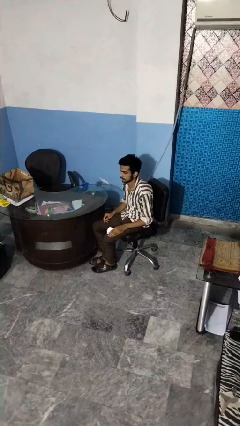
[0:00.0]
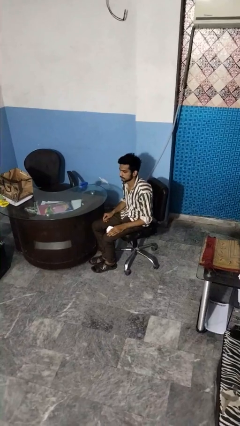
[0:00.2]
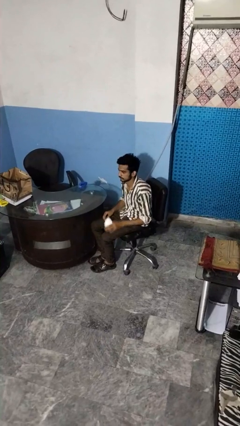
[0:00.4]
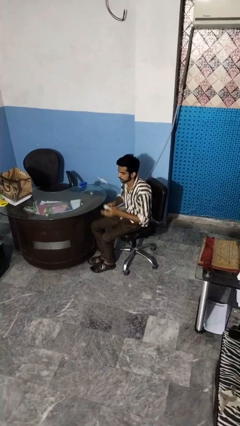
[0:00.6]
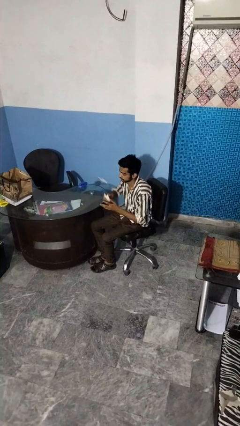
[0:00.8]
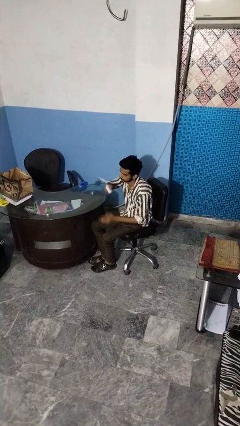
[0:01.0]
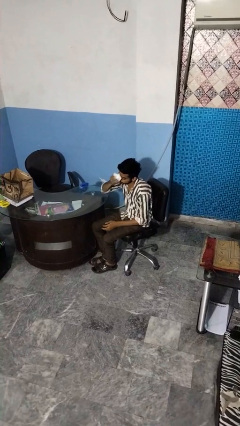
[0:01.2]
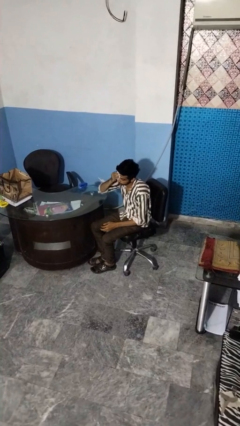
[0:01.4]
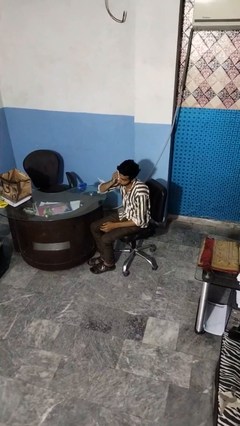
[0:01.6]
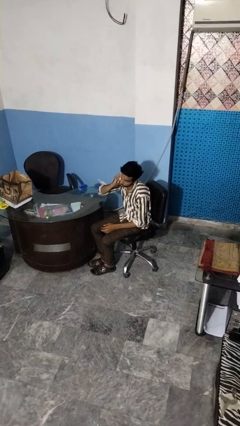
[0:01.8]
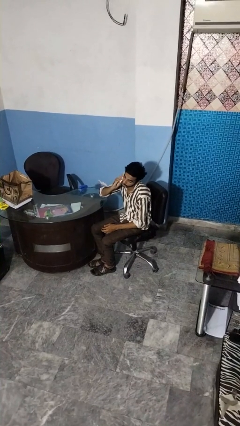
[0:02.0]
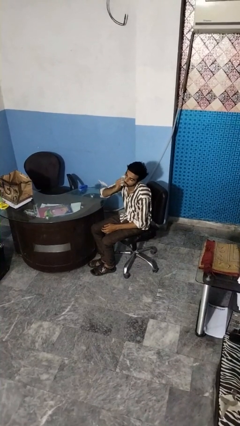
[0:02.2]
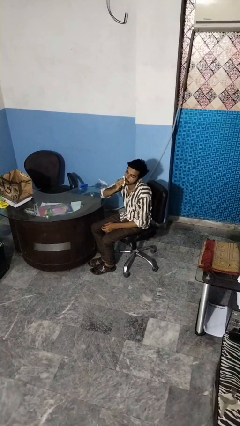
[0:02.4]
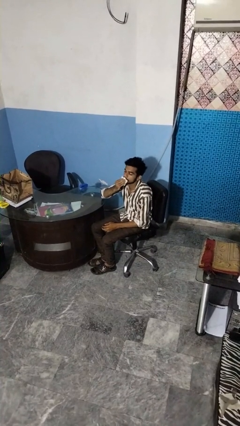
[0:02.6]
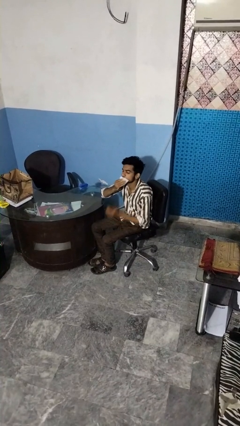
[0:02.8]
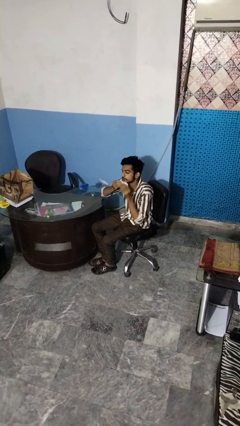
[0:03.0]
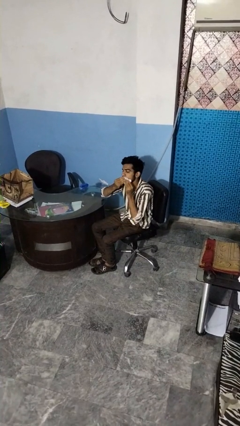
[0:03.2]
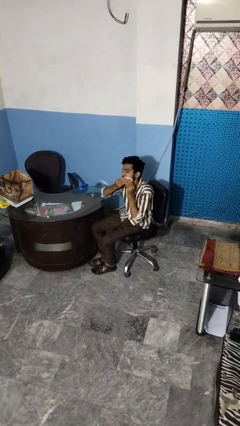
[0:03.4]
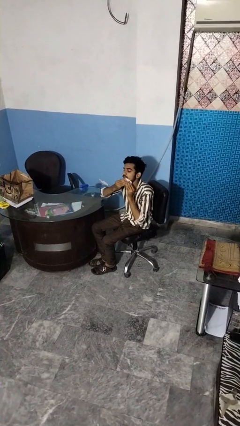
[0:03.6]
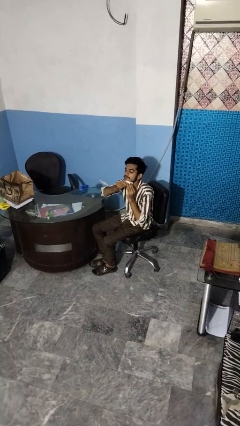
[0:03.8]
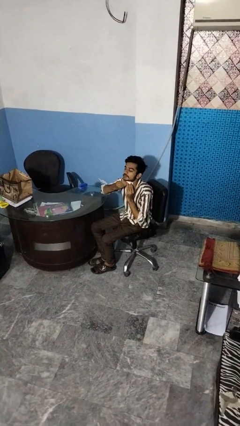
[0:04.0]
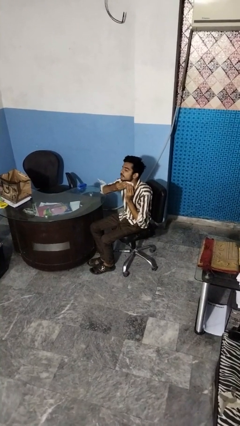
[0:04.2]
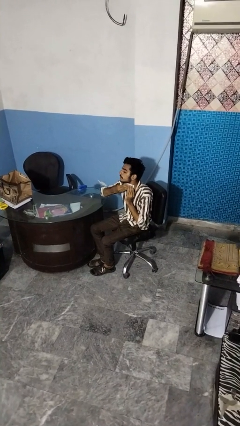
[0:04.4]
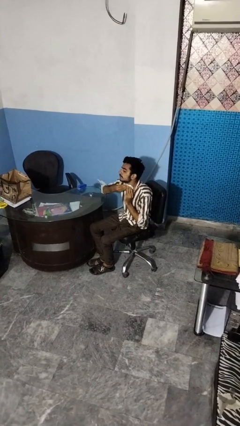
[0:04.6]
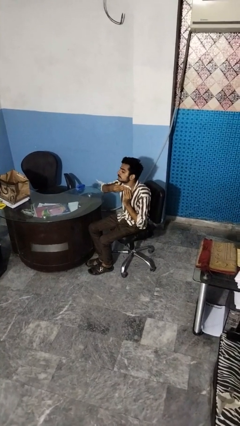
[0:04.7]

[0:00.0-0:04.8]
person wipes mouth with napkin

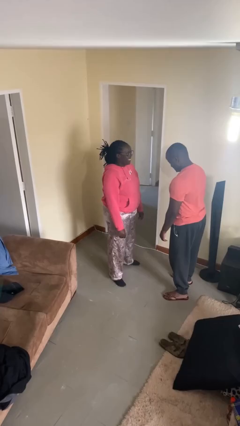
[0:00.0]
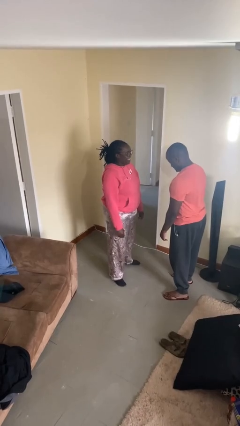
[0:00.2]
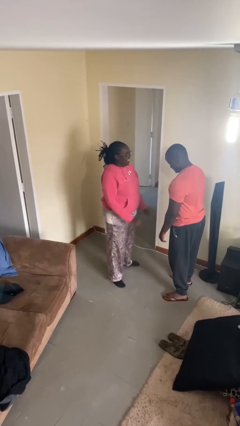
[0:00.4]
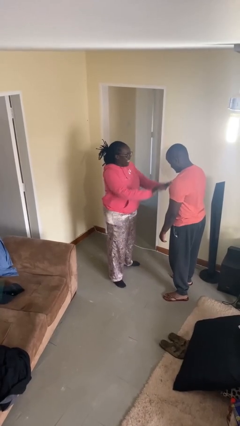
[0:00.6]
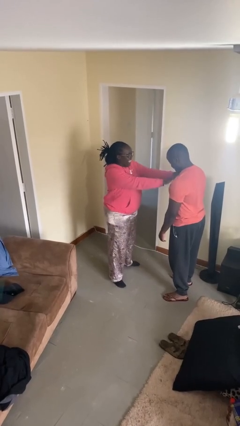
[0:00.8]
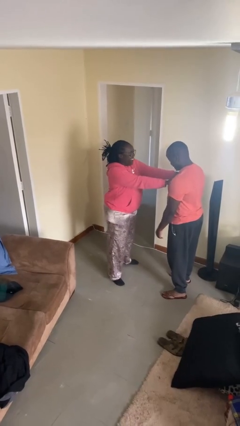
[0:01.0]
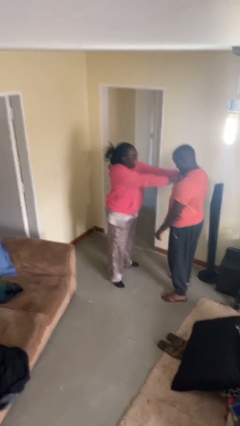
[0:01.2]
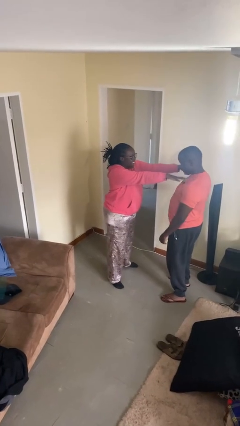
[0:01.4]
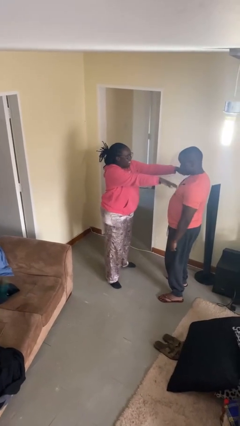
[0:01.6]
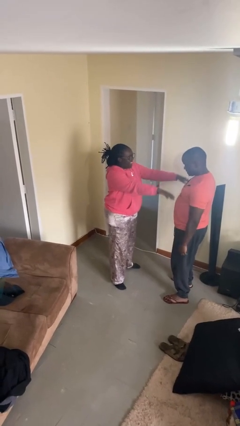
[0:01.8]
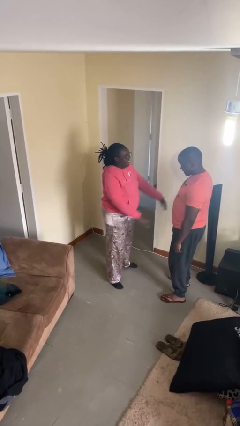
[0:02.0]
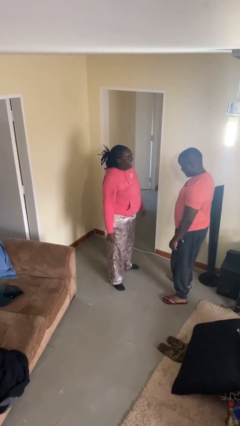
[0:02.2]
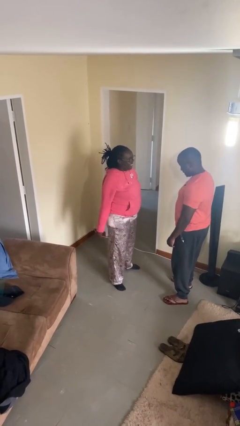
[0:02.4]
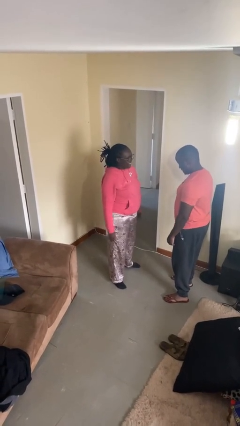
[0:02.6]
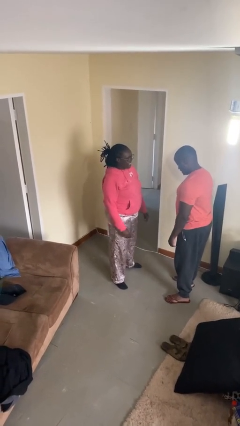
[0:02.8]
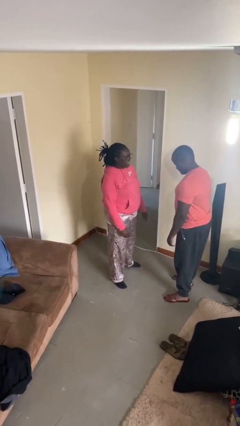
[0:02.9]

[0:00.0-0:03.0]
person shoves person

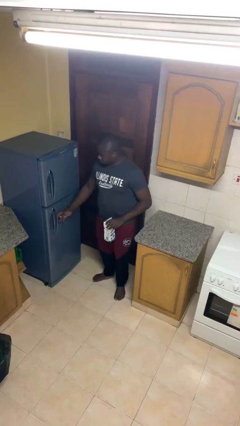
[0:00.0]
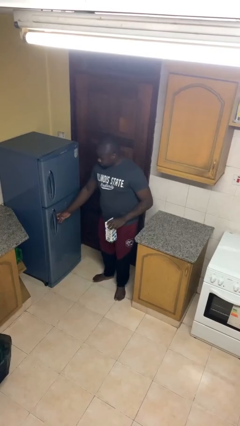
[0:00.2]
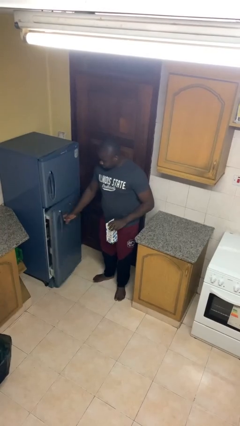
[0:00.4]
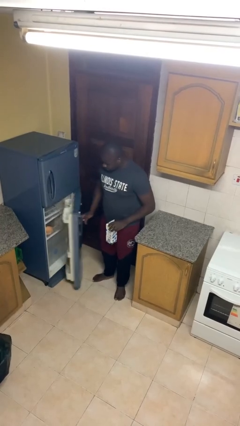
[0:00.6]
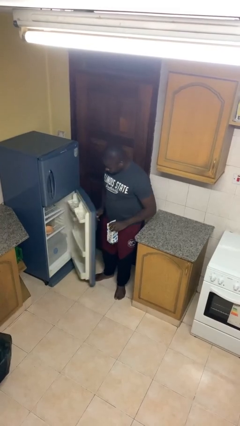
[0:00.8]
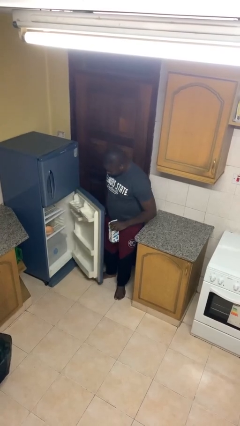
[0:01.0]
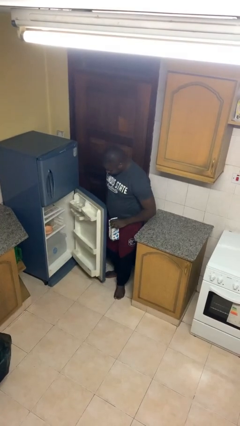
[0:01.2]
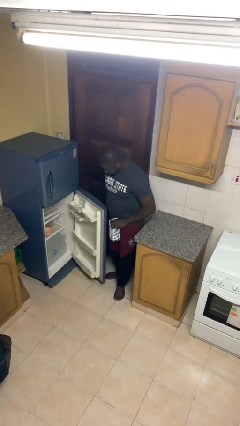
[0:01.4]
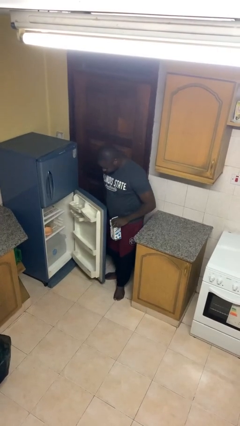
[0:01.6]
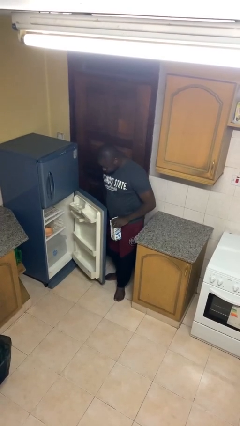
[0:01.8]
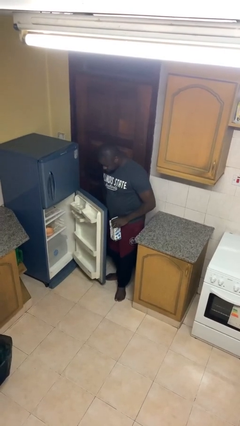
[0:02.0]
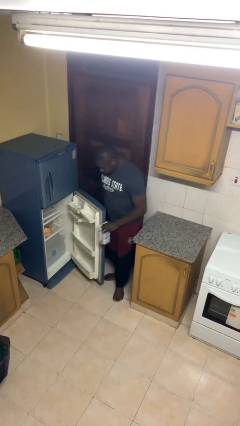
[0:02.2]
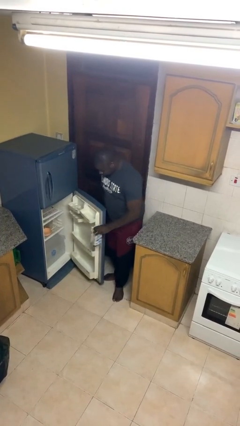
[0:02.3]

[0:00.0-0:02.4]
person opens refrigerator

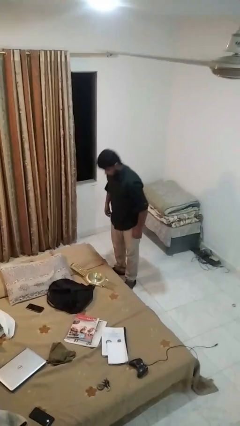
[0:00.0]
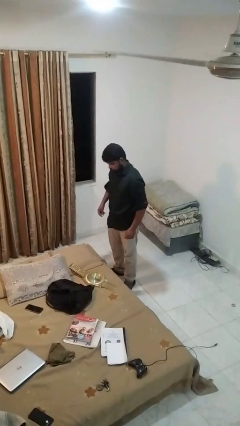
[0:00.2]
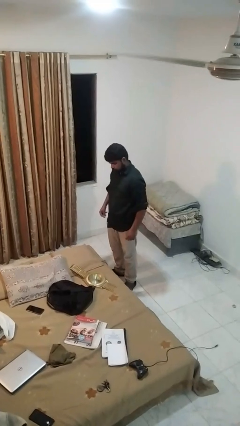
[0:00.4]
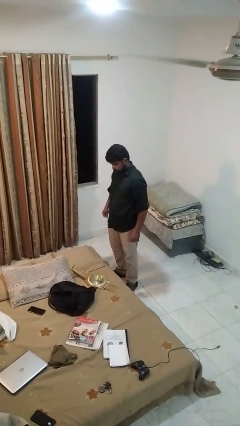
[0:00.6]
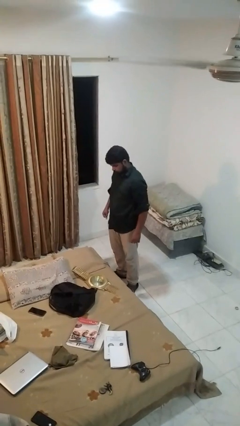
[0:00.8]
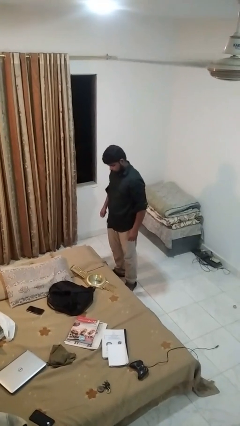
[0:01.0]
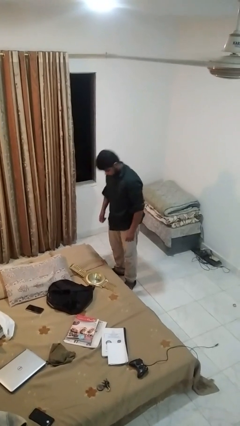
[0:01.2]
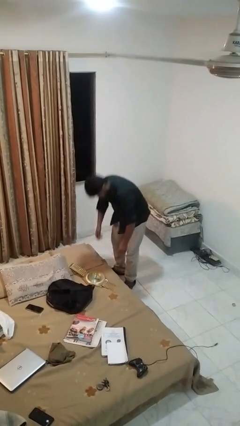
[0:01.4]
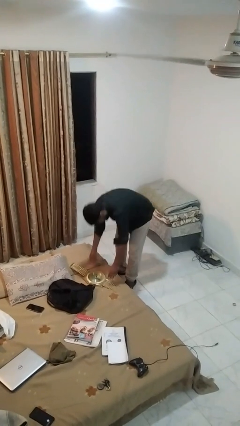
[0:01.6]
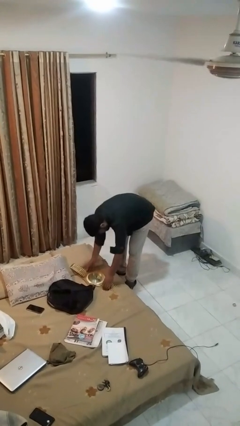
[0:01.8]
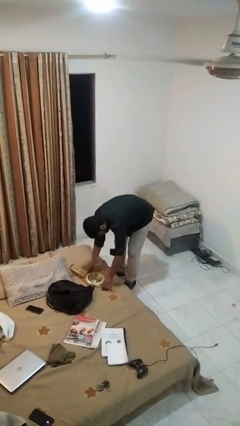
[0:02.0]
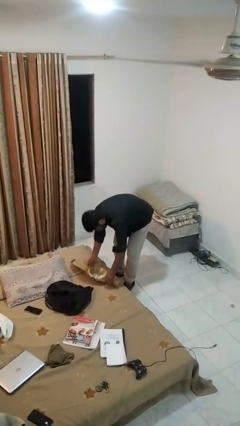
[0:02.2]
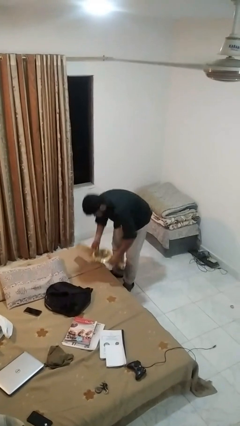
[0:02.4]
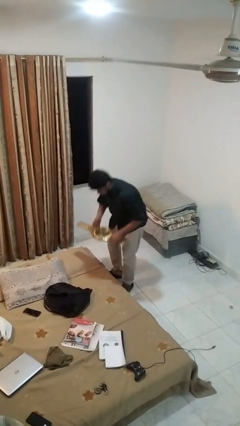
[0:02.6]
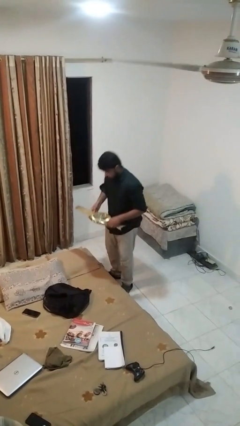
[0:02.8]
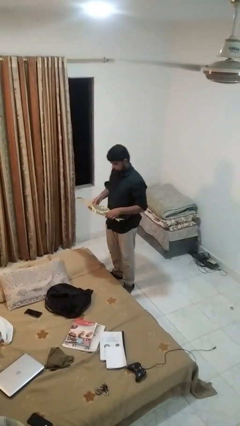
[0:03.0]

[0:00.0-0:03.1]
person picks up object from bed

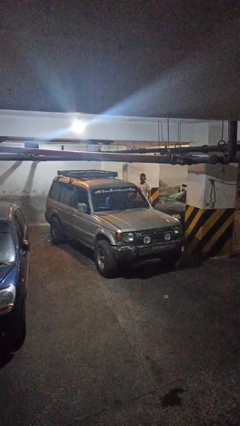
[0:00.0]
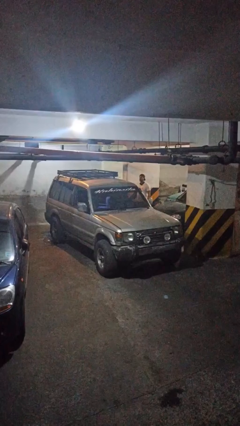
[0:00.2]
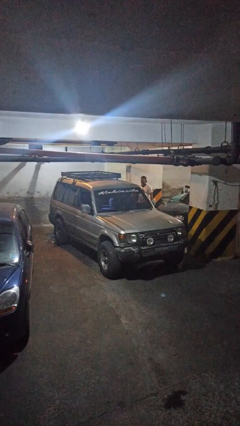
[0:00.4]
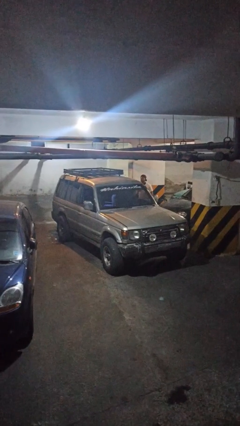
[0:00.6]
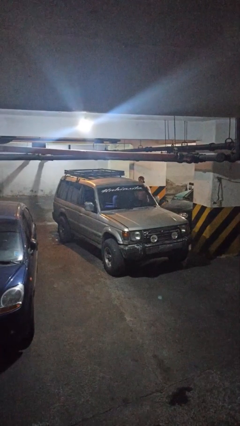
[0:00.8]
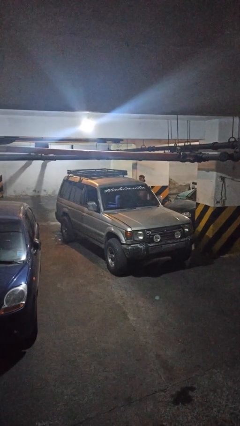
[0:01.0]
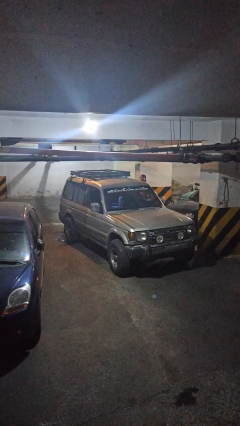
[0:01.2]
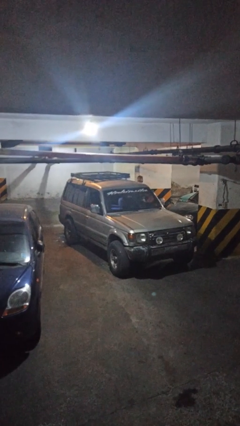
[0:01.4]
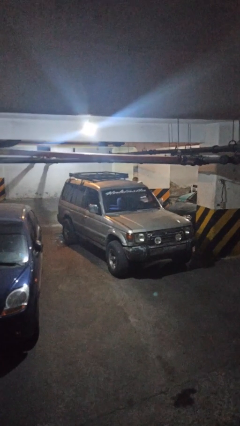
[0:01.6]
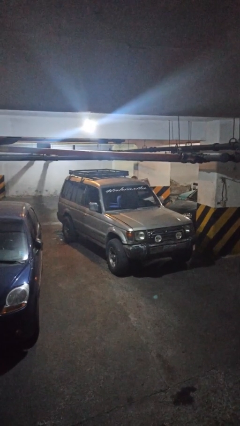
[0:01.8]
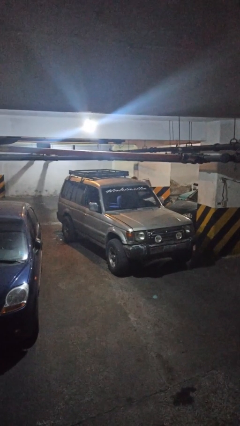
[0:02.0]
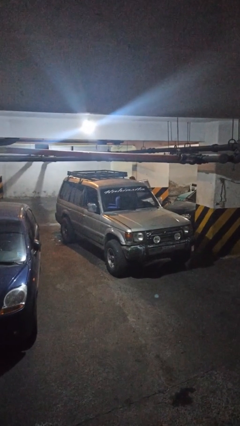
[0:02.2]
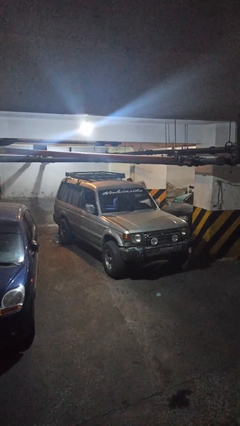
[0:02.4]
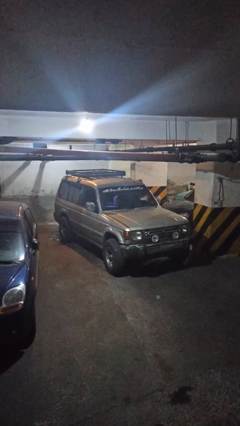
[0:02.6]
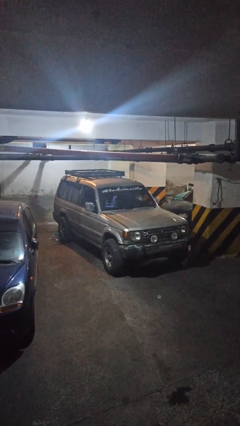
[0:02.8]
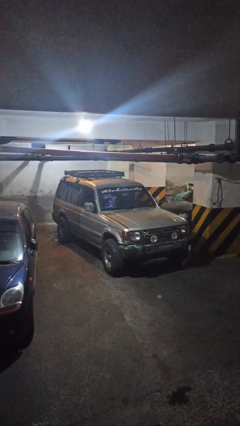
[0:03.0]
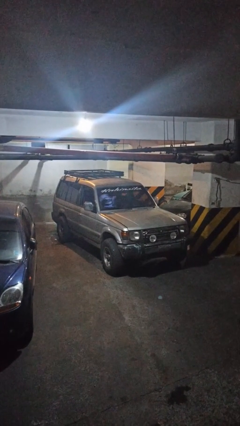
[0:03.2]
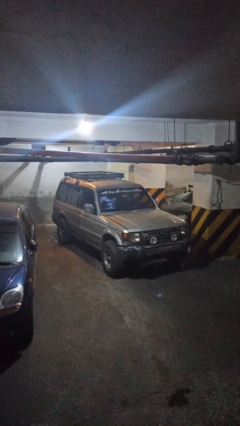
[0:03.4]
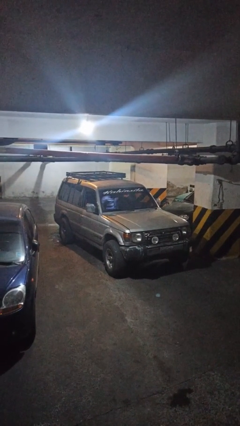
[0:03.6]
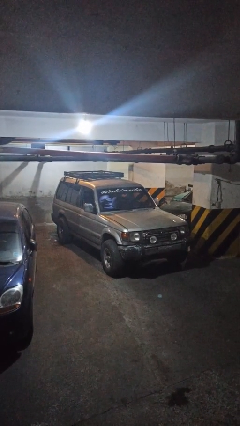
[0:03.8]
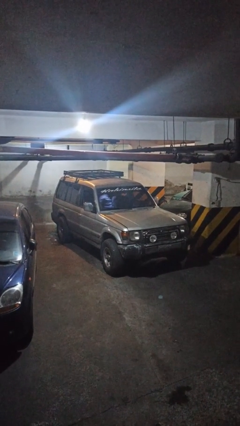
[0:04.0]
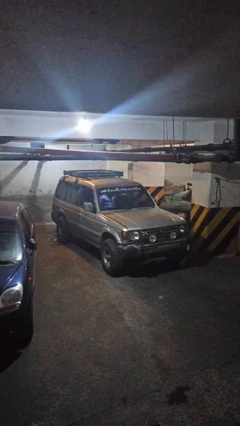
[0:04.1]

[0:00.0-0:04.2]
car picks up person
